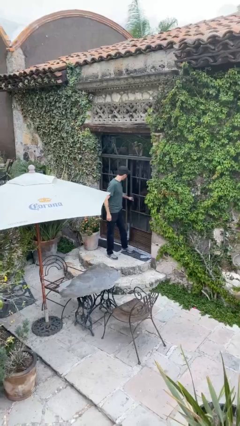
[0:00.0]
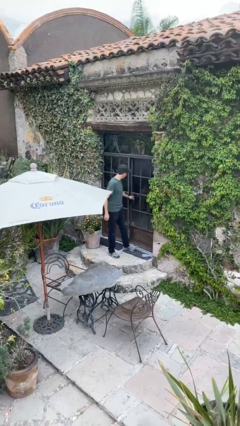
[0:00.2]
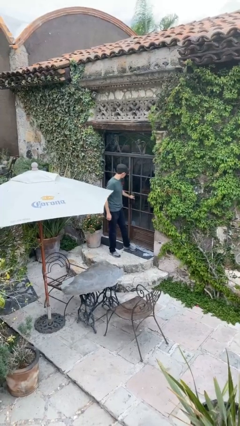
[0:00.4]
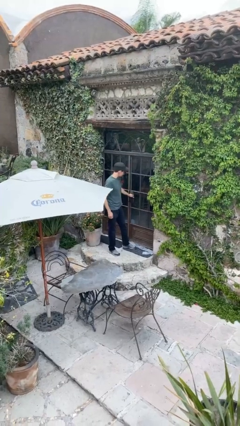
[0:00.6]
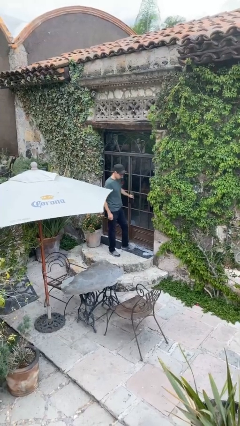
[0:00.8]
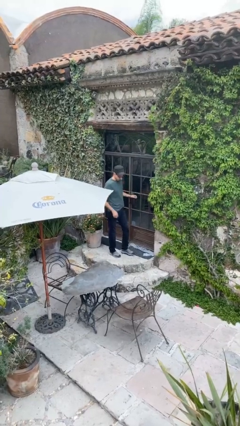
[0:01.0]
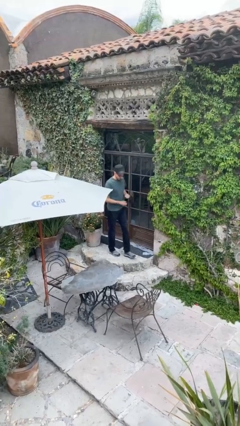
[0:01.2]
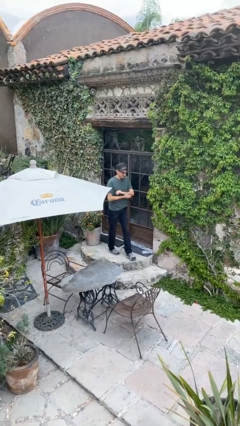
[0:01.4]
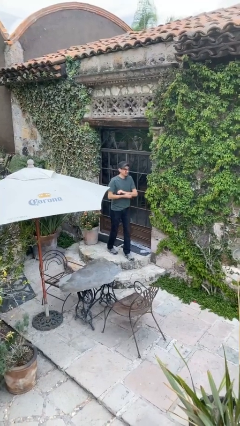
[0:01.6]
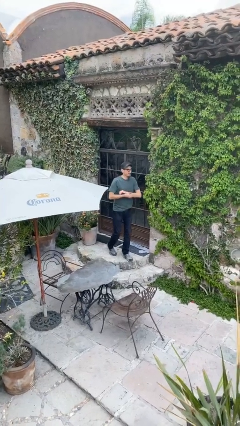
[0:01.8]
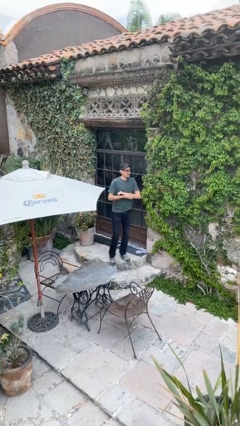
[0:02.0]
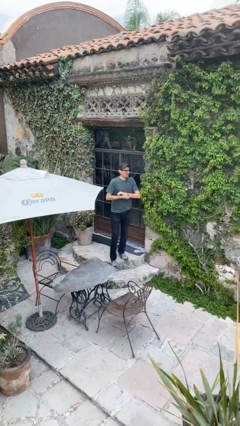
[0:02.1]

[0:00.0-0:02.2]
person closes facility door

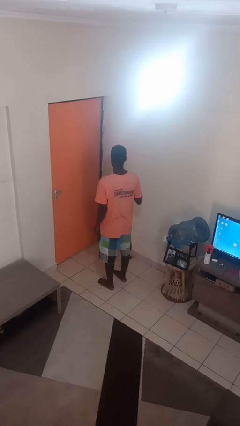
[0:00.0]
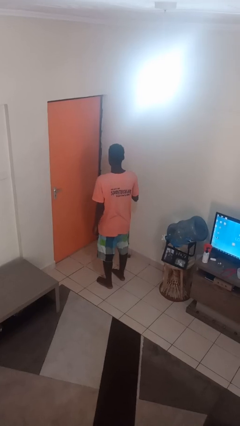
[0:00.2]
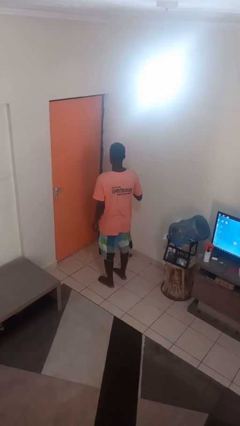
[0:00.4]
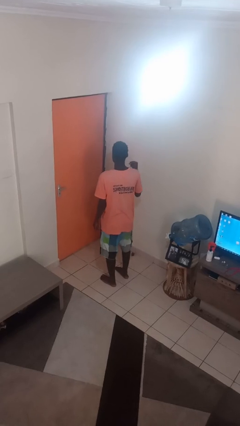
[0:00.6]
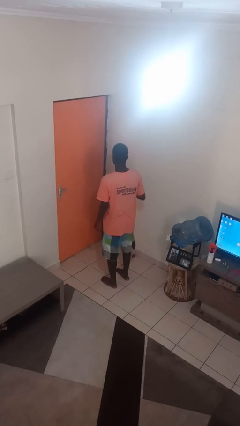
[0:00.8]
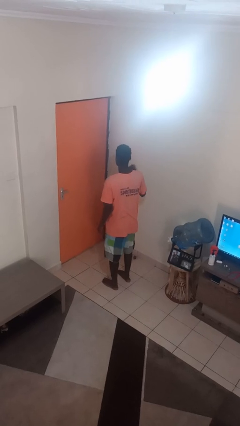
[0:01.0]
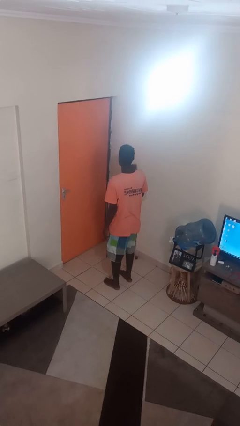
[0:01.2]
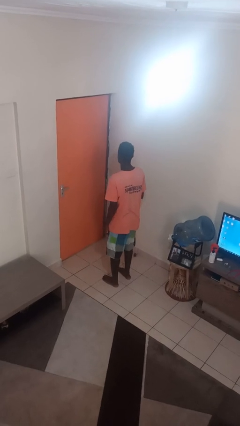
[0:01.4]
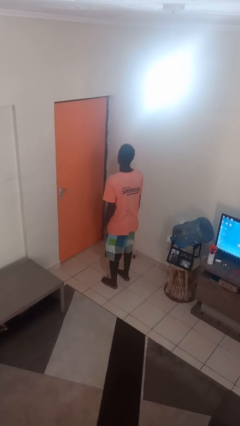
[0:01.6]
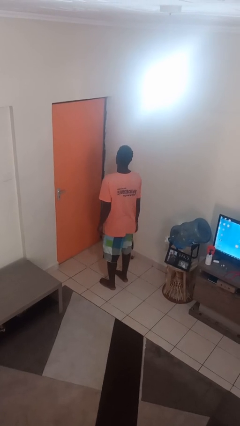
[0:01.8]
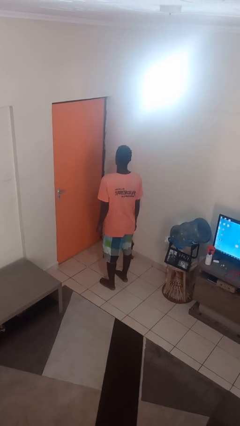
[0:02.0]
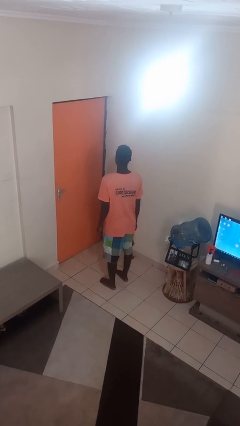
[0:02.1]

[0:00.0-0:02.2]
person snaps fingers

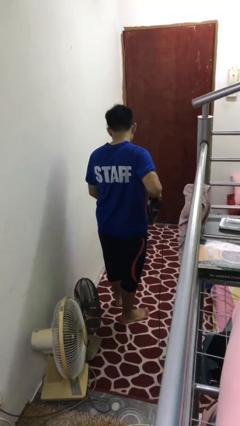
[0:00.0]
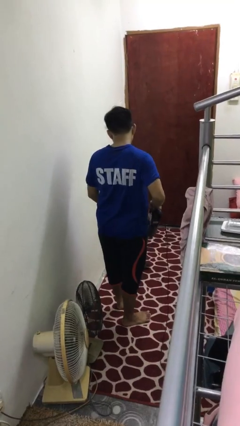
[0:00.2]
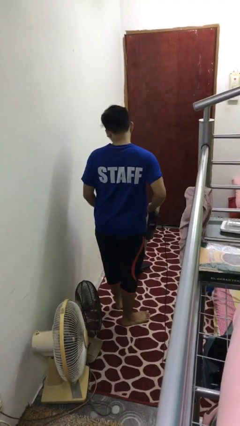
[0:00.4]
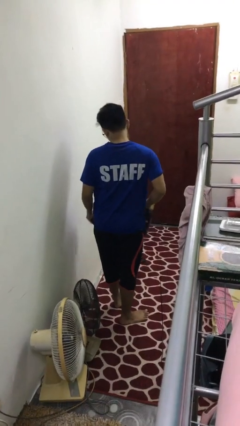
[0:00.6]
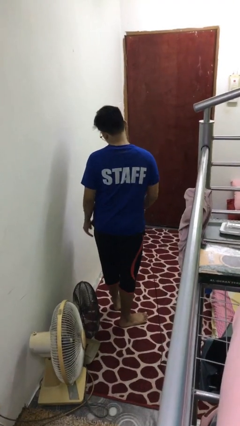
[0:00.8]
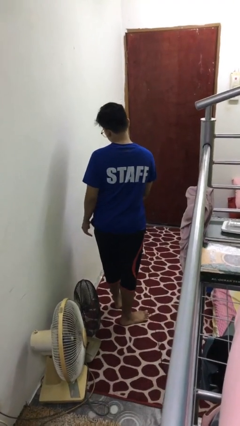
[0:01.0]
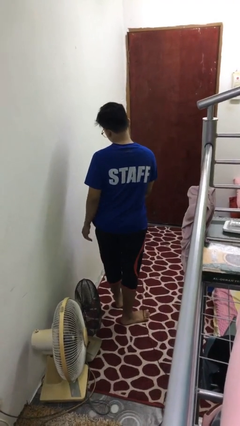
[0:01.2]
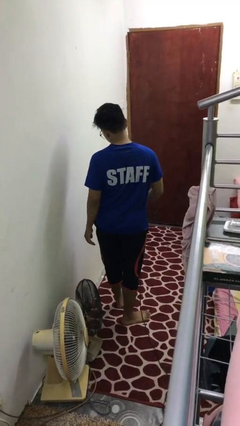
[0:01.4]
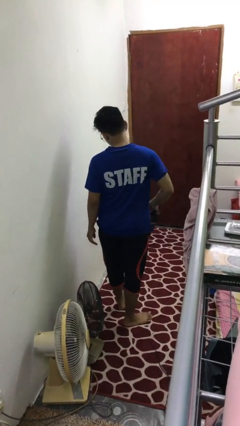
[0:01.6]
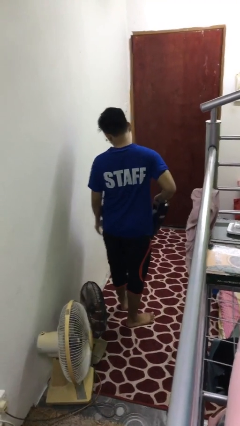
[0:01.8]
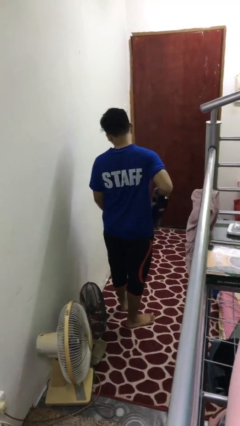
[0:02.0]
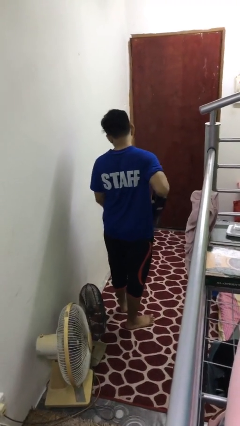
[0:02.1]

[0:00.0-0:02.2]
person vacuums carpet

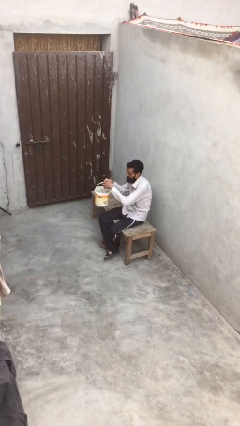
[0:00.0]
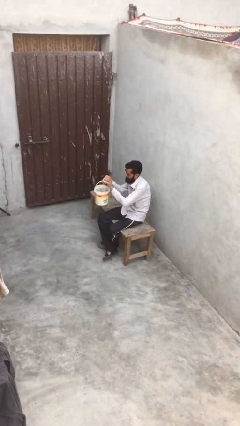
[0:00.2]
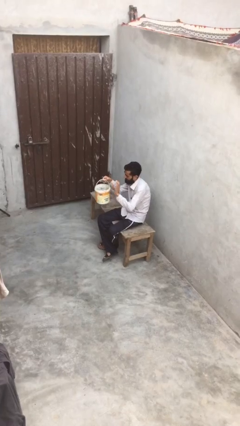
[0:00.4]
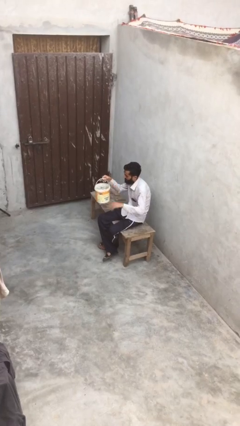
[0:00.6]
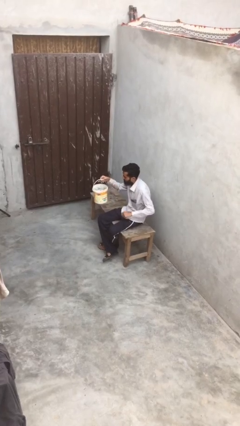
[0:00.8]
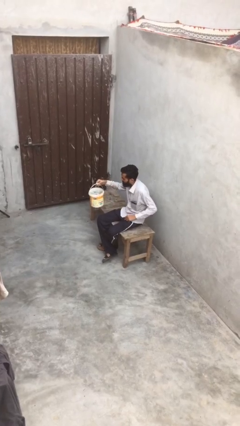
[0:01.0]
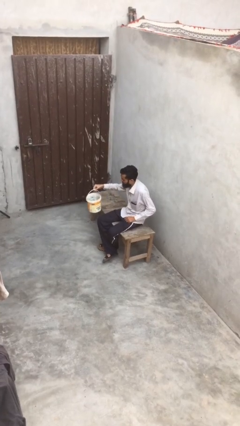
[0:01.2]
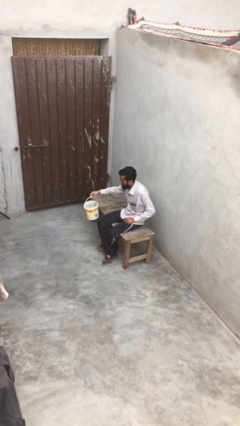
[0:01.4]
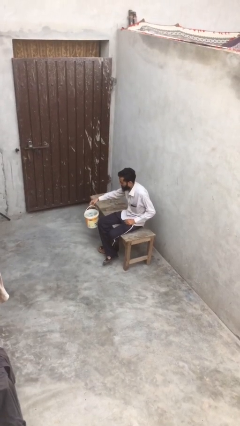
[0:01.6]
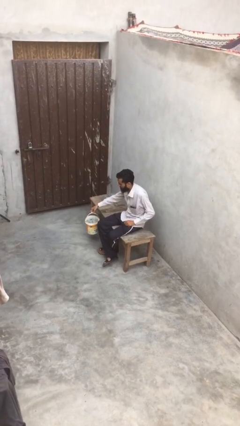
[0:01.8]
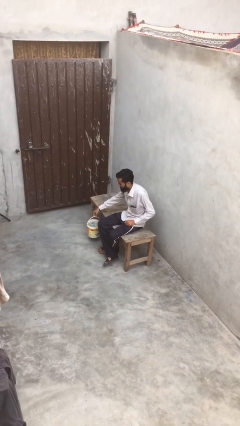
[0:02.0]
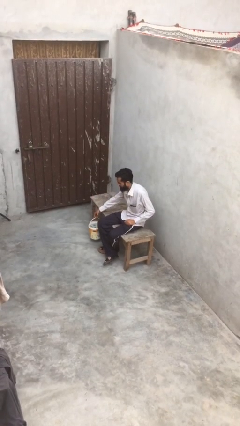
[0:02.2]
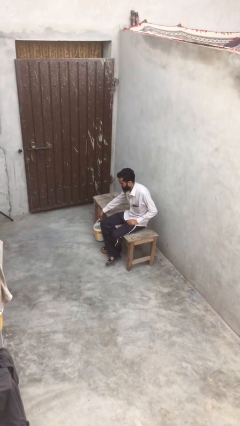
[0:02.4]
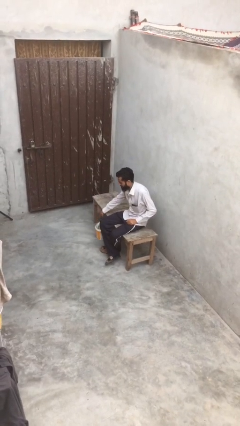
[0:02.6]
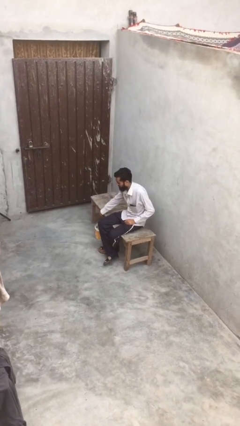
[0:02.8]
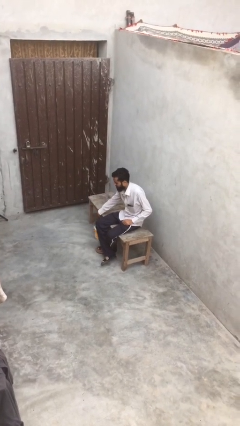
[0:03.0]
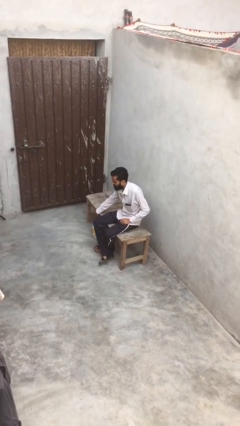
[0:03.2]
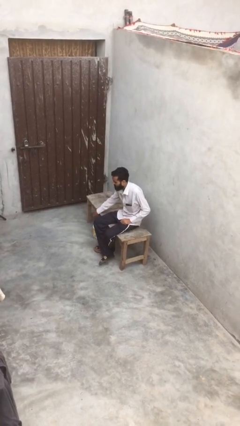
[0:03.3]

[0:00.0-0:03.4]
person puts down object on floor

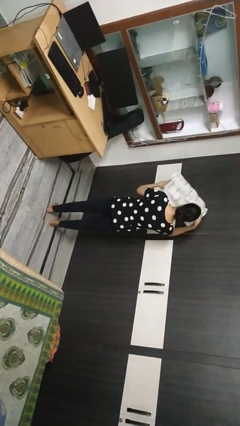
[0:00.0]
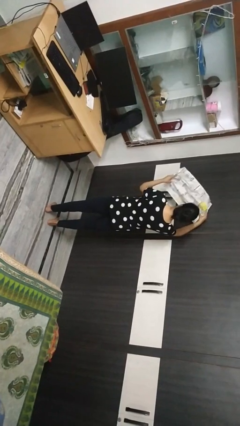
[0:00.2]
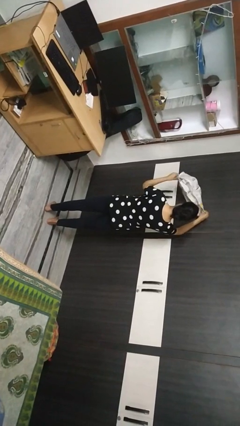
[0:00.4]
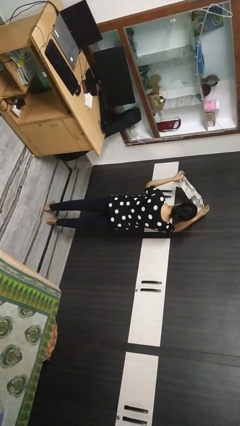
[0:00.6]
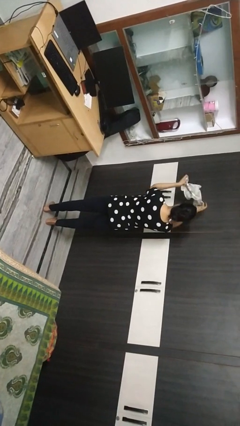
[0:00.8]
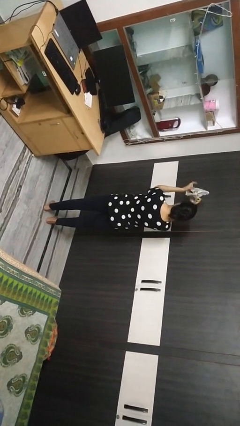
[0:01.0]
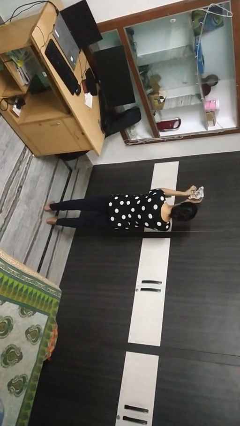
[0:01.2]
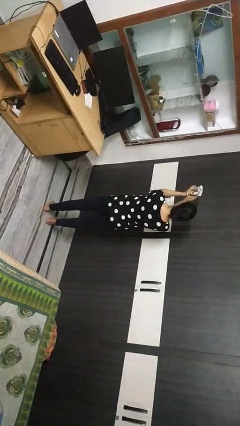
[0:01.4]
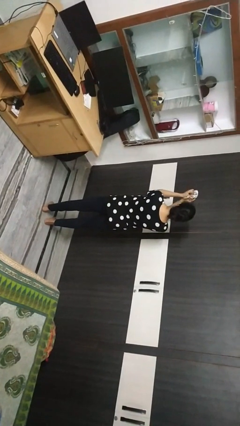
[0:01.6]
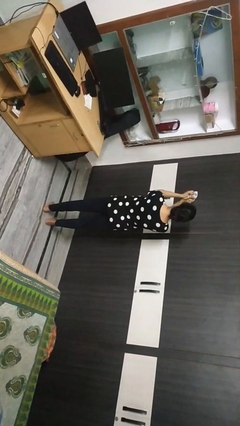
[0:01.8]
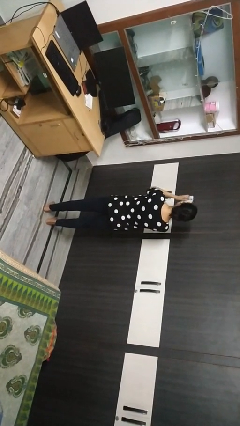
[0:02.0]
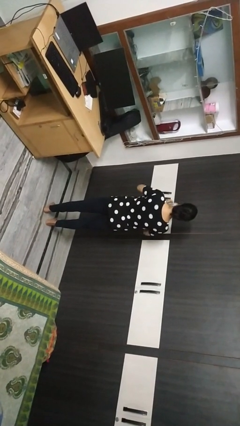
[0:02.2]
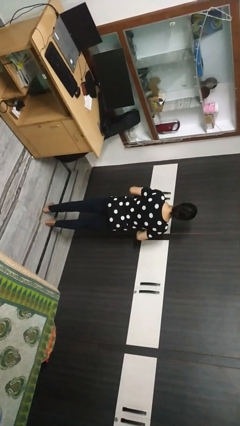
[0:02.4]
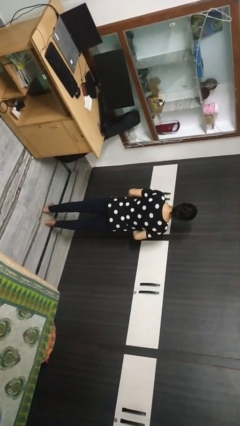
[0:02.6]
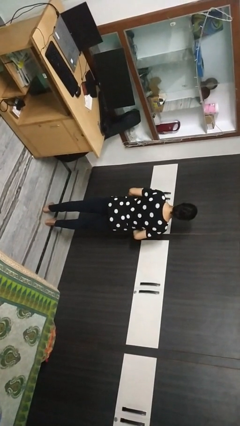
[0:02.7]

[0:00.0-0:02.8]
person crumples paper

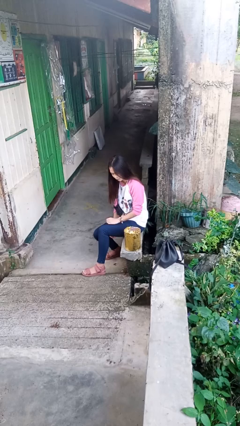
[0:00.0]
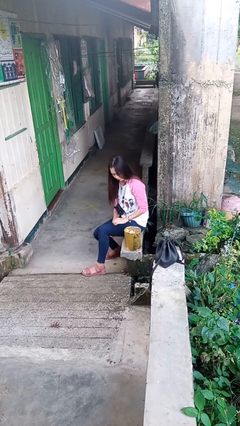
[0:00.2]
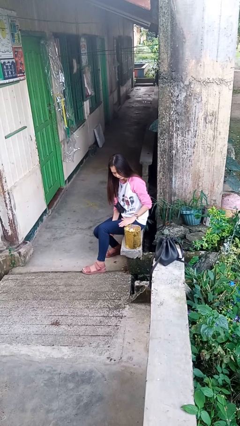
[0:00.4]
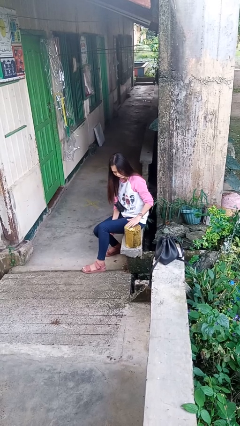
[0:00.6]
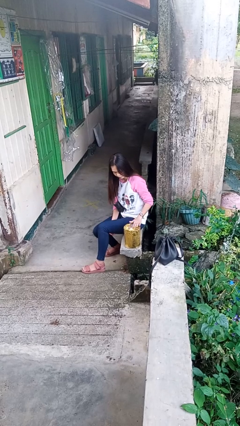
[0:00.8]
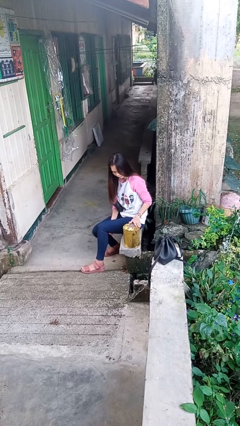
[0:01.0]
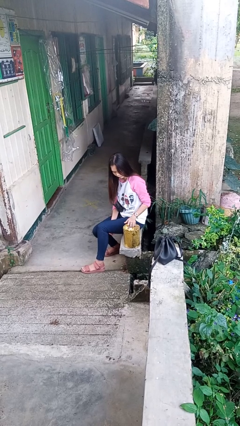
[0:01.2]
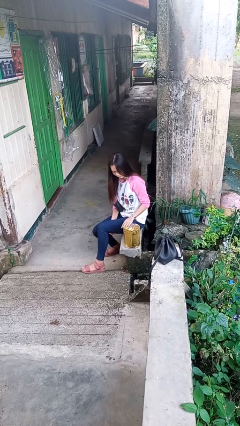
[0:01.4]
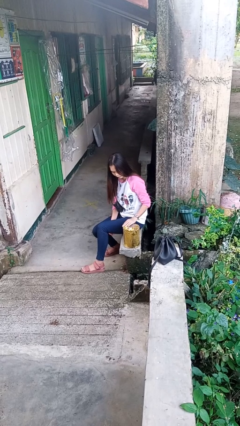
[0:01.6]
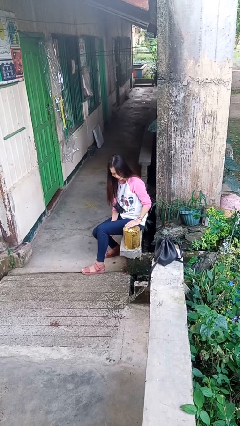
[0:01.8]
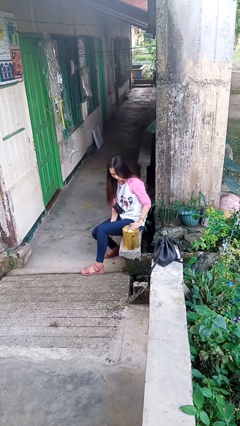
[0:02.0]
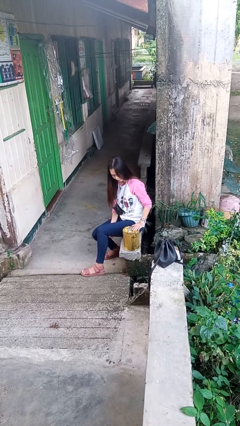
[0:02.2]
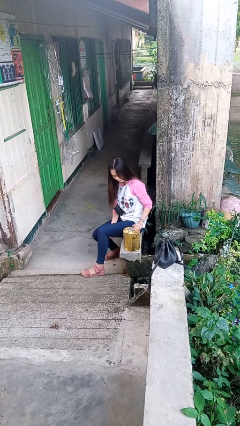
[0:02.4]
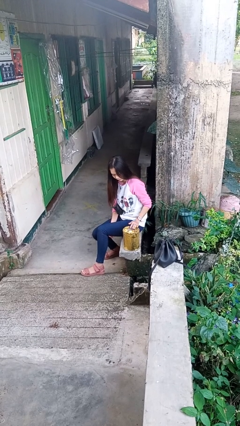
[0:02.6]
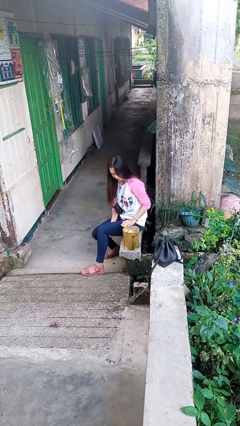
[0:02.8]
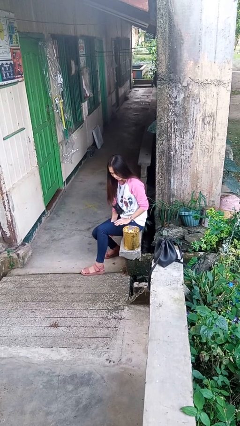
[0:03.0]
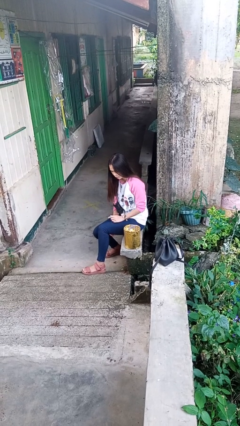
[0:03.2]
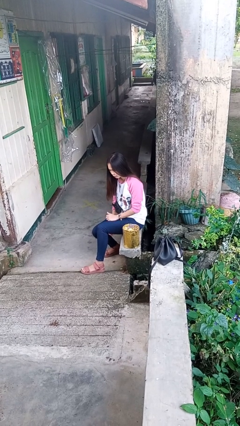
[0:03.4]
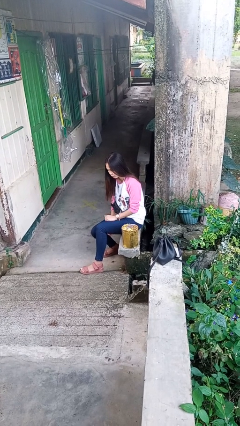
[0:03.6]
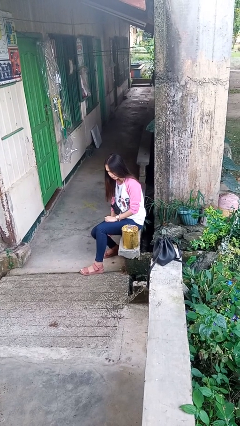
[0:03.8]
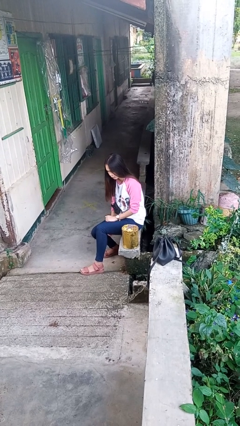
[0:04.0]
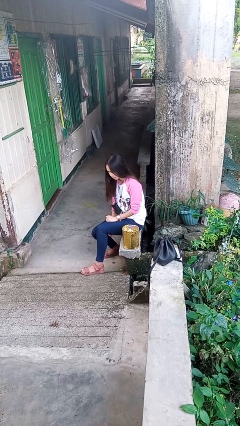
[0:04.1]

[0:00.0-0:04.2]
person waves hand over object

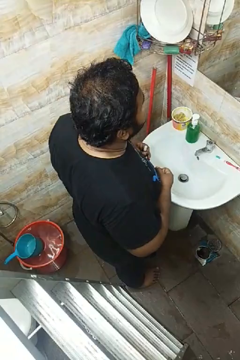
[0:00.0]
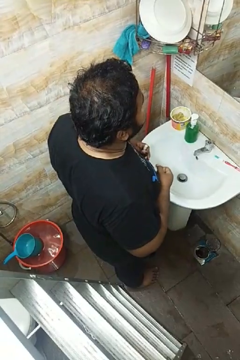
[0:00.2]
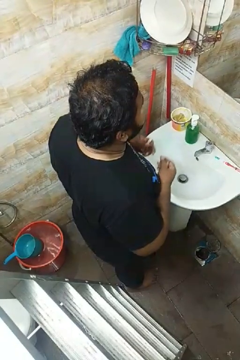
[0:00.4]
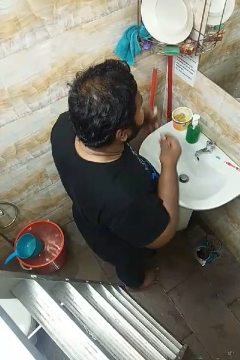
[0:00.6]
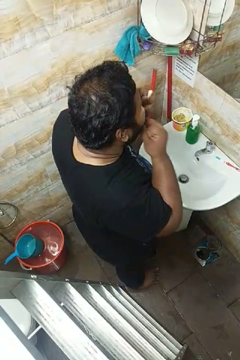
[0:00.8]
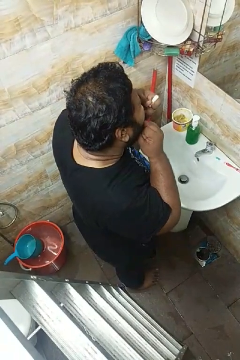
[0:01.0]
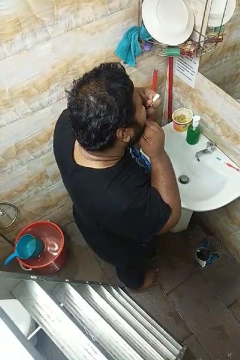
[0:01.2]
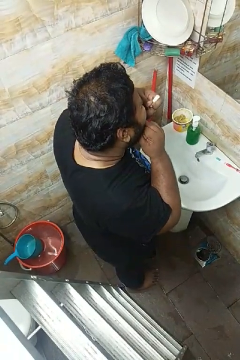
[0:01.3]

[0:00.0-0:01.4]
person flosses
